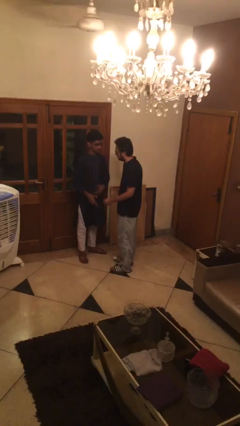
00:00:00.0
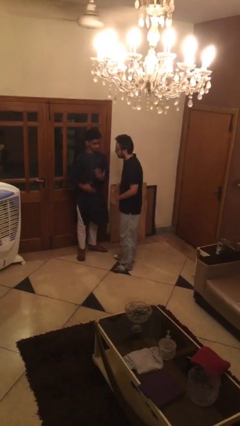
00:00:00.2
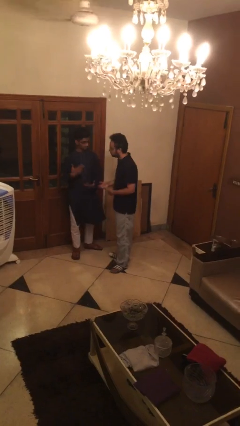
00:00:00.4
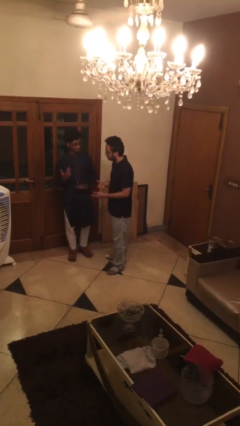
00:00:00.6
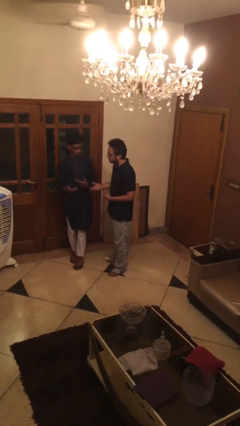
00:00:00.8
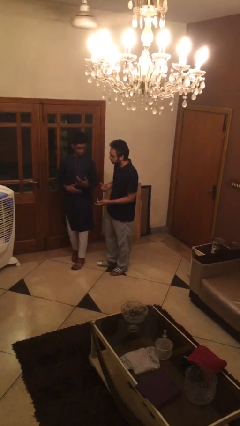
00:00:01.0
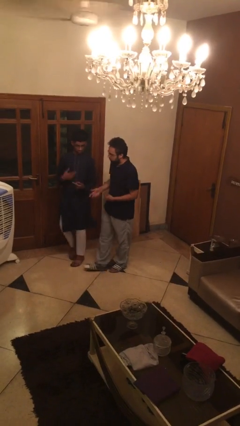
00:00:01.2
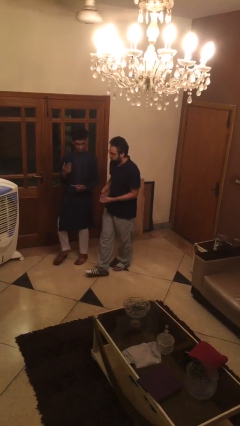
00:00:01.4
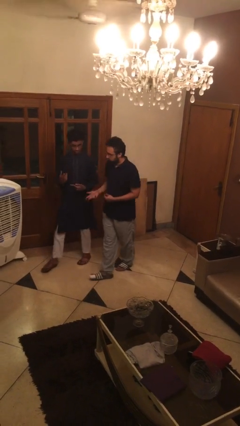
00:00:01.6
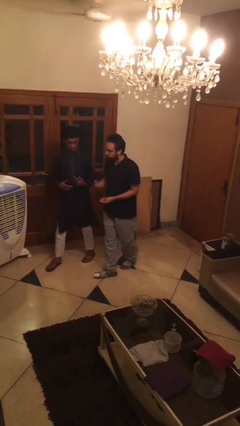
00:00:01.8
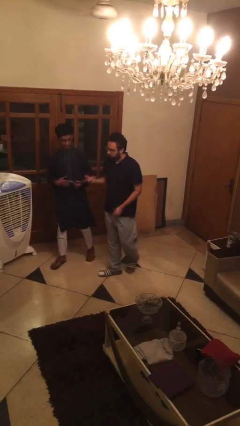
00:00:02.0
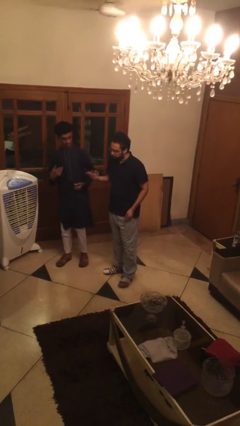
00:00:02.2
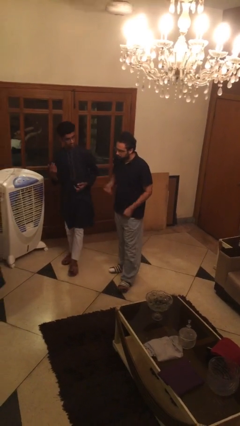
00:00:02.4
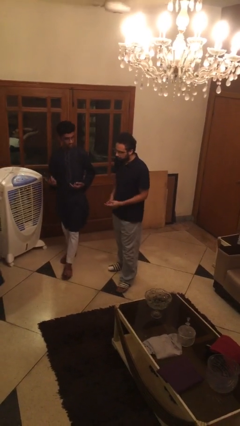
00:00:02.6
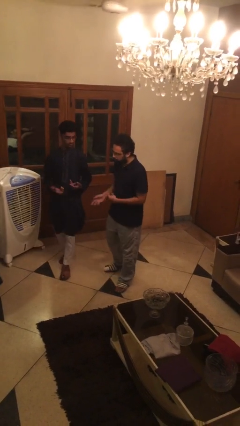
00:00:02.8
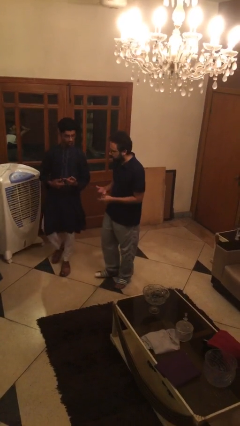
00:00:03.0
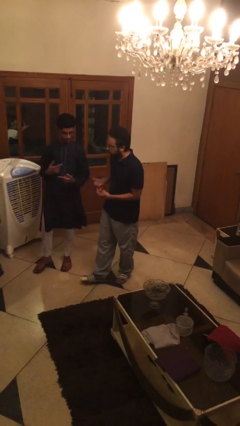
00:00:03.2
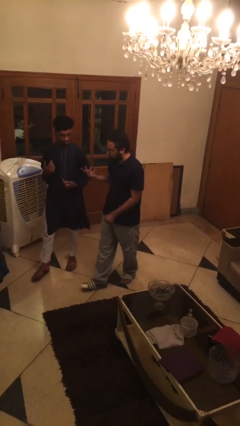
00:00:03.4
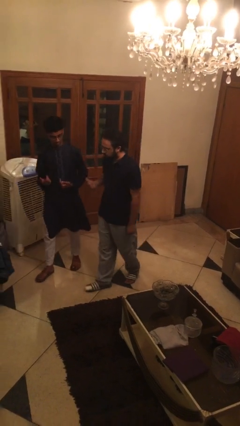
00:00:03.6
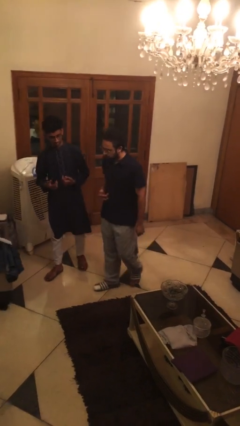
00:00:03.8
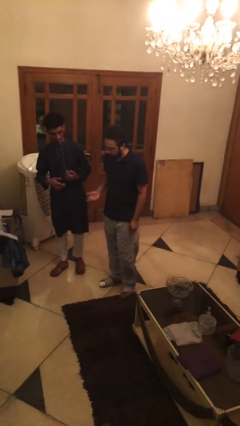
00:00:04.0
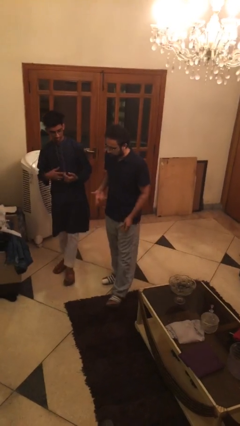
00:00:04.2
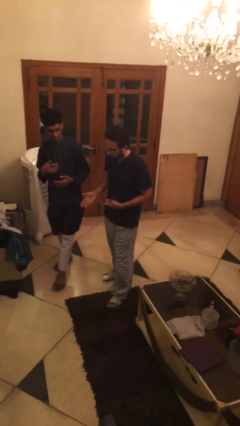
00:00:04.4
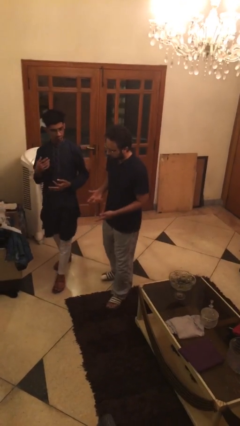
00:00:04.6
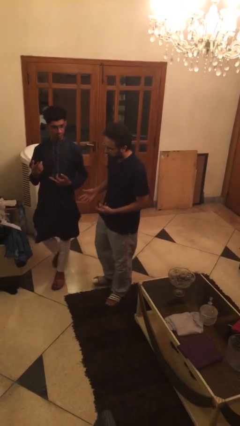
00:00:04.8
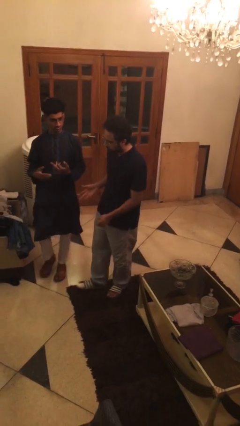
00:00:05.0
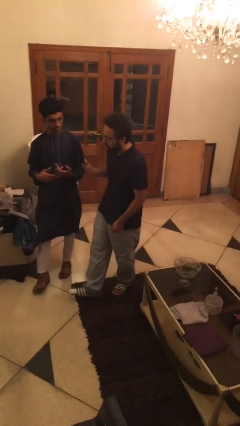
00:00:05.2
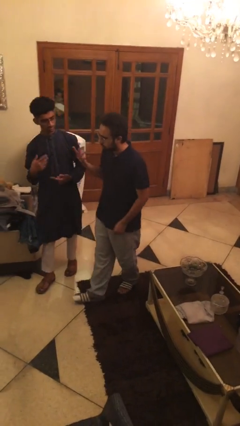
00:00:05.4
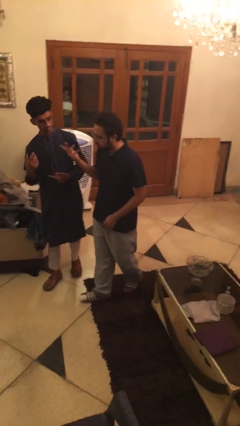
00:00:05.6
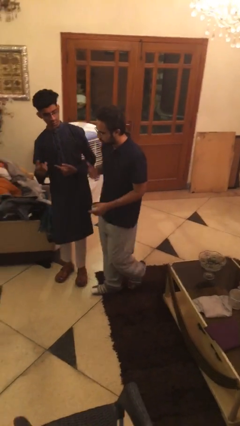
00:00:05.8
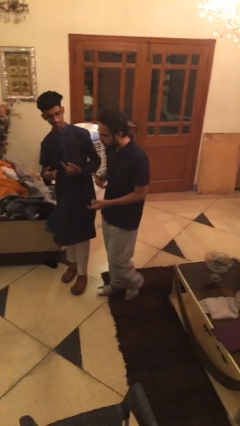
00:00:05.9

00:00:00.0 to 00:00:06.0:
person talks to person

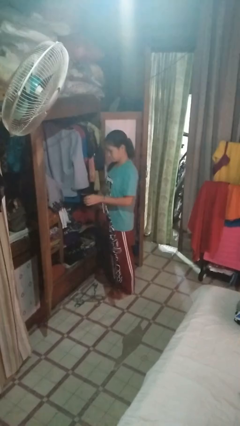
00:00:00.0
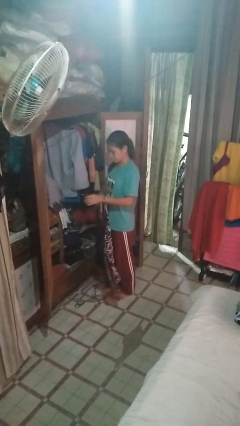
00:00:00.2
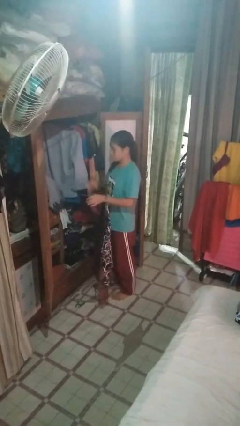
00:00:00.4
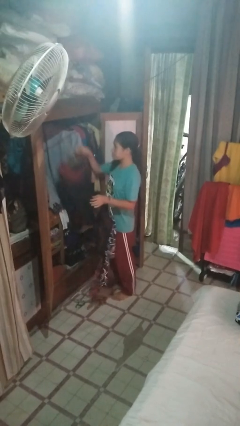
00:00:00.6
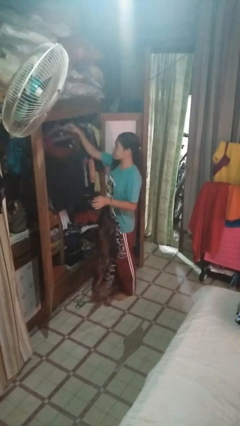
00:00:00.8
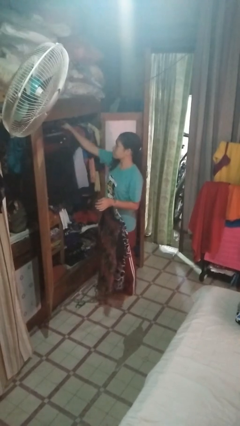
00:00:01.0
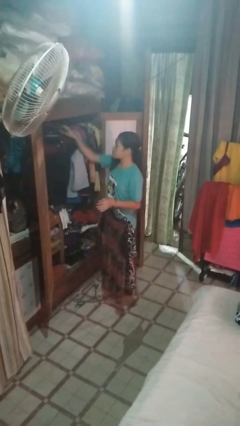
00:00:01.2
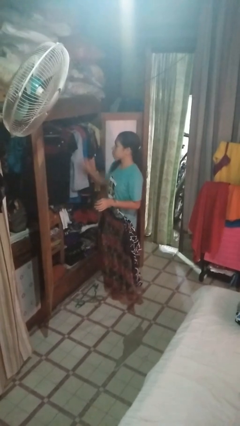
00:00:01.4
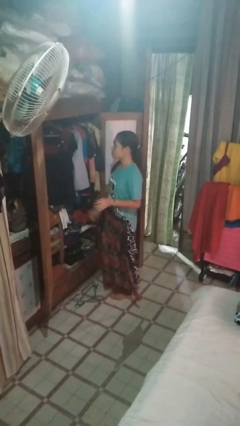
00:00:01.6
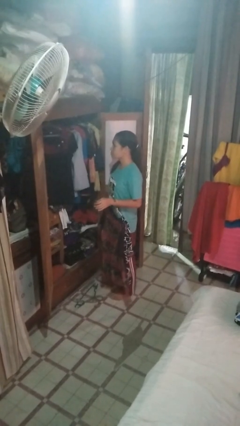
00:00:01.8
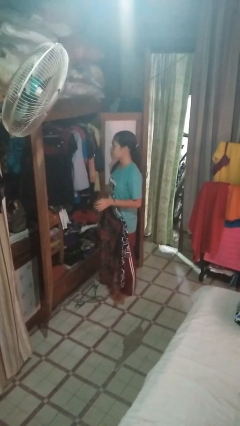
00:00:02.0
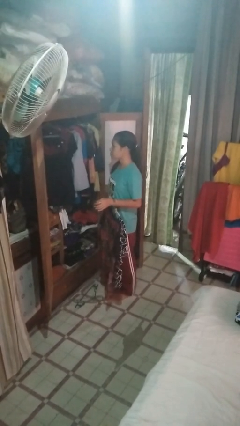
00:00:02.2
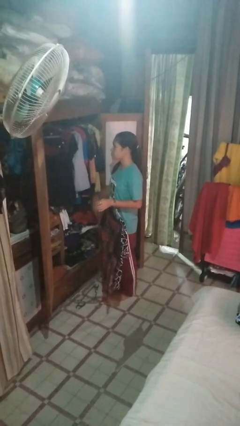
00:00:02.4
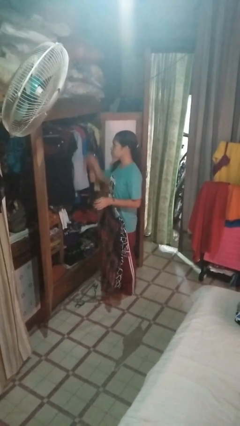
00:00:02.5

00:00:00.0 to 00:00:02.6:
person puts clothes into closet

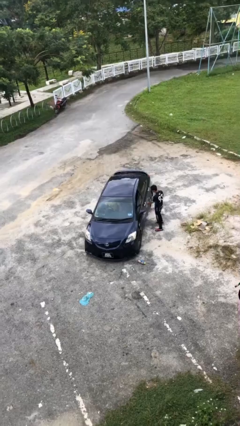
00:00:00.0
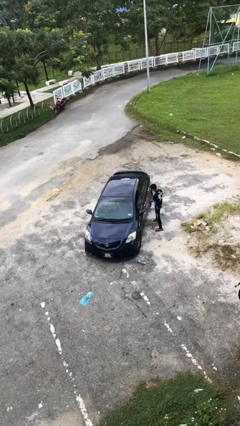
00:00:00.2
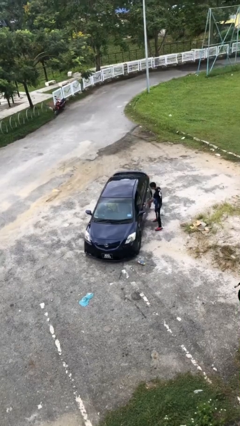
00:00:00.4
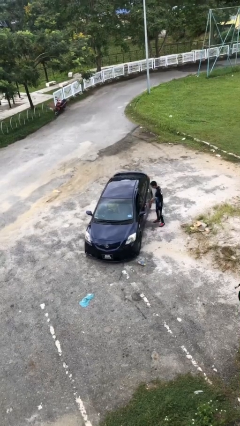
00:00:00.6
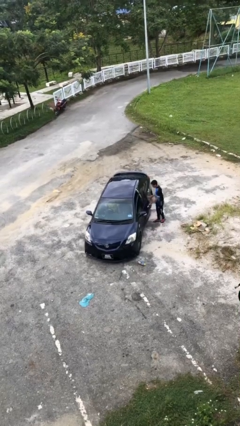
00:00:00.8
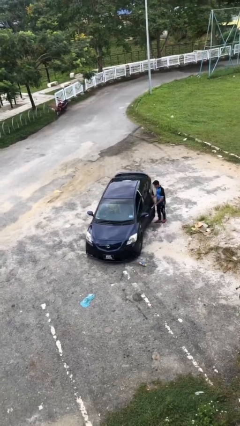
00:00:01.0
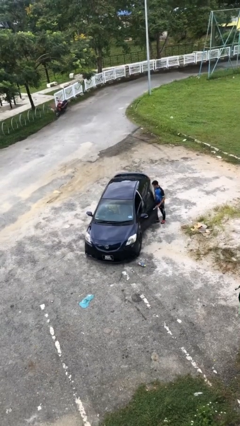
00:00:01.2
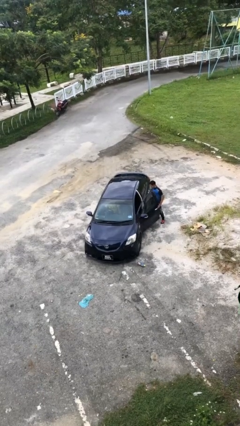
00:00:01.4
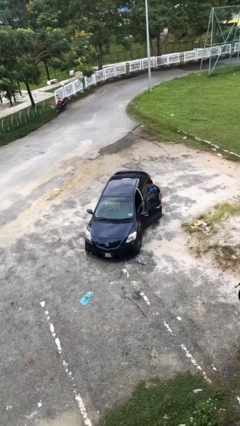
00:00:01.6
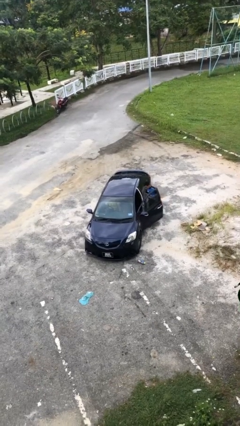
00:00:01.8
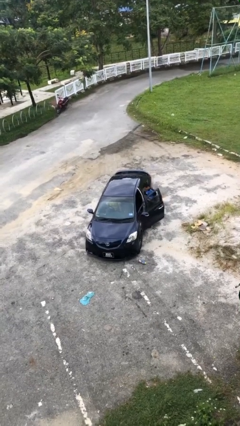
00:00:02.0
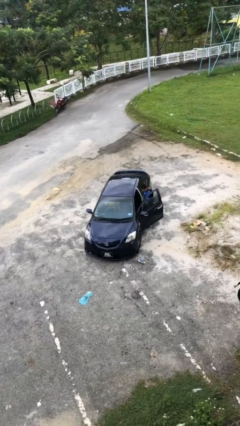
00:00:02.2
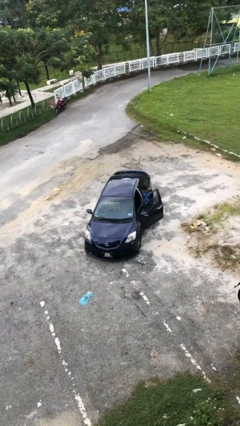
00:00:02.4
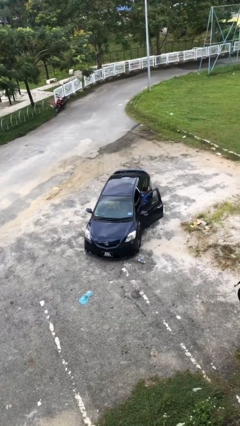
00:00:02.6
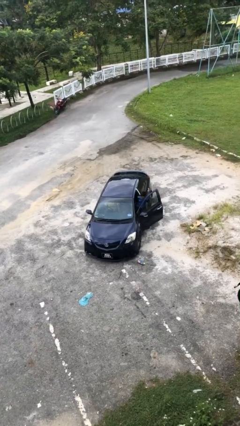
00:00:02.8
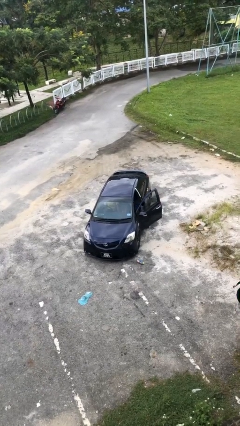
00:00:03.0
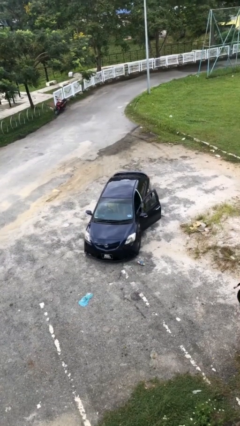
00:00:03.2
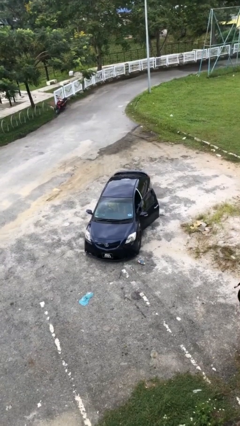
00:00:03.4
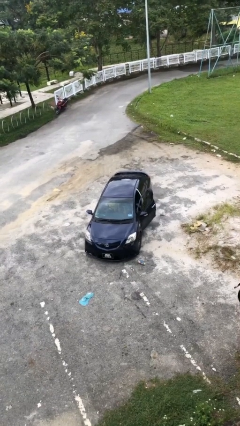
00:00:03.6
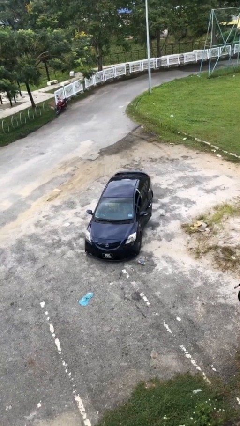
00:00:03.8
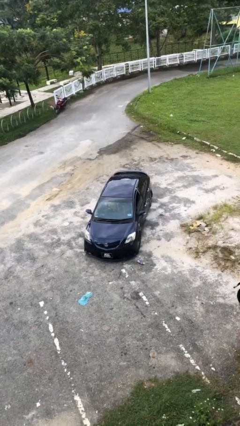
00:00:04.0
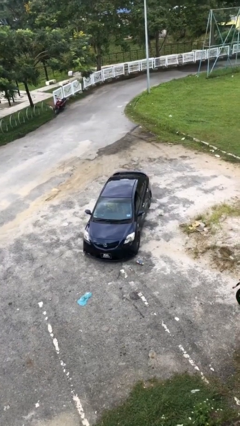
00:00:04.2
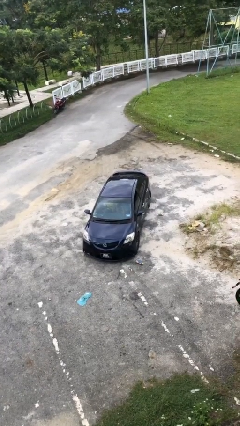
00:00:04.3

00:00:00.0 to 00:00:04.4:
car picks up person

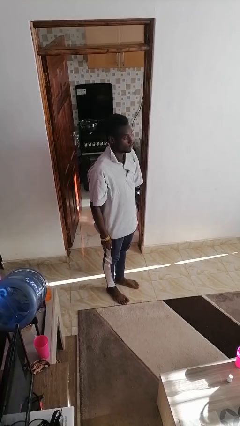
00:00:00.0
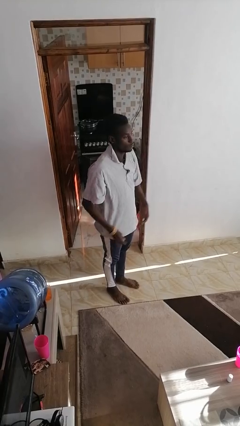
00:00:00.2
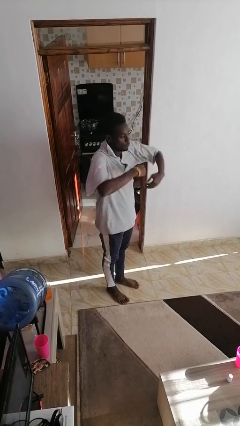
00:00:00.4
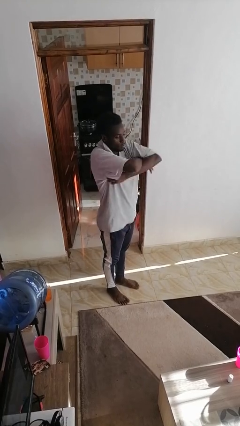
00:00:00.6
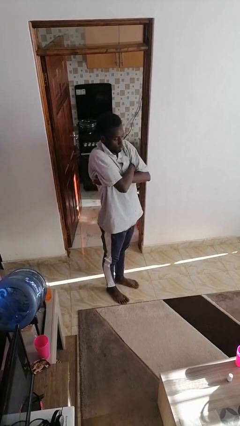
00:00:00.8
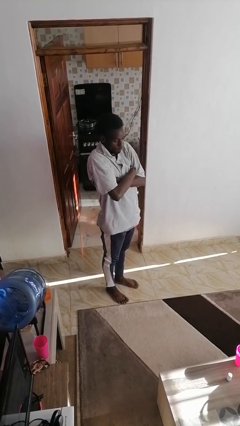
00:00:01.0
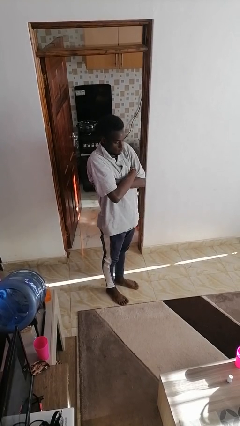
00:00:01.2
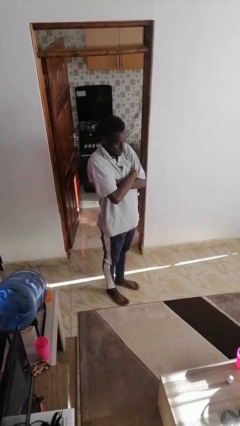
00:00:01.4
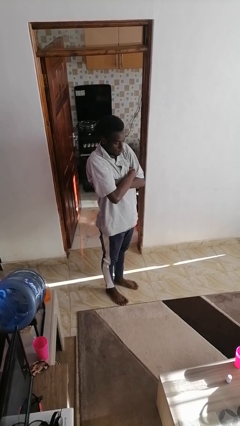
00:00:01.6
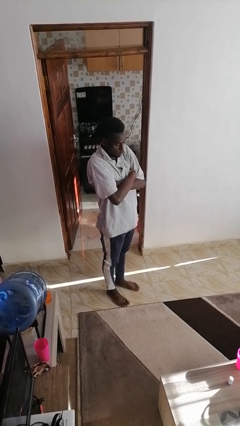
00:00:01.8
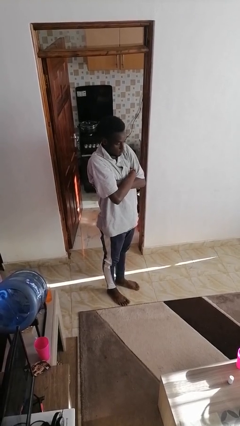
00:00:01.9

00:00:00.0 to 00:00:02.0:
person crosses arms

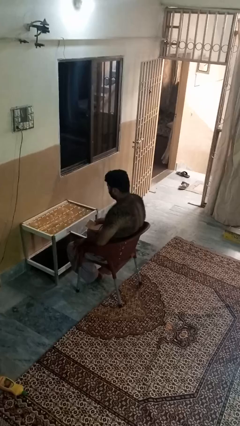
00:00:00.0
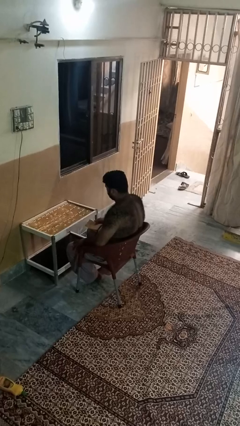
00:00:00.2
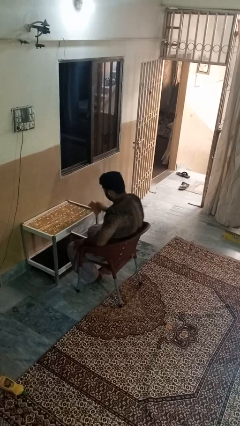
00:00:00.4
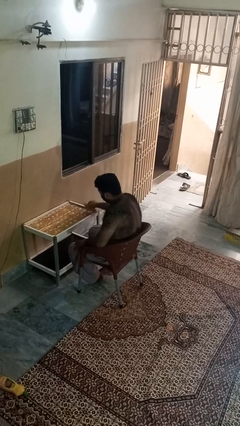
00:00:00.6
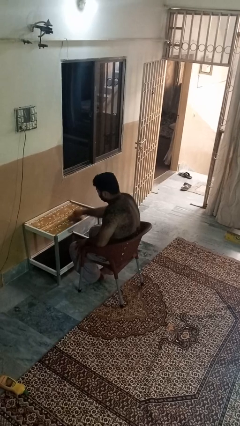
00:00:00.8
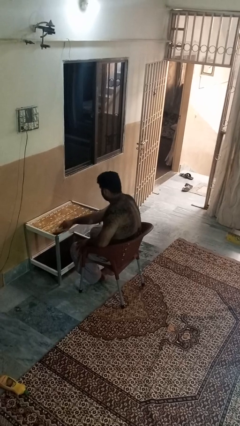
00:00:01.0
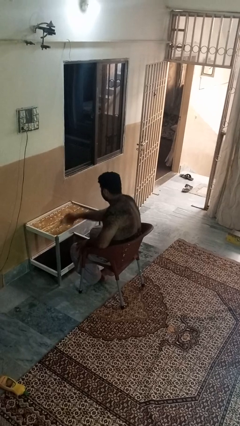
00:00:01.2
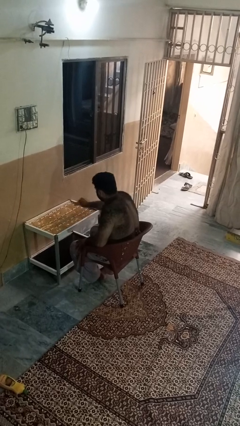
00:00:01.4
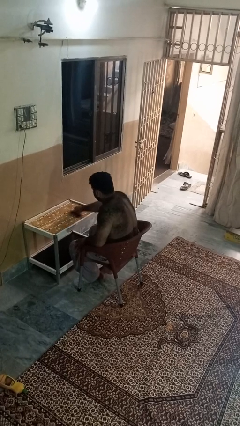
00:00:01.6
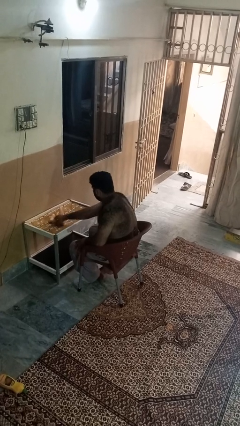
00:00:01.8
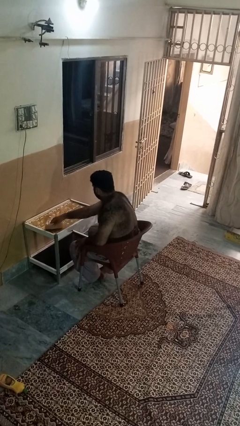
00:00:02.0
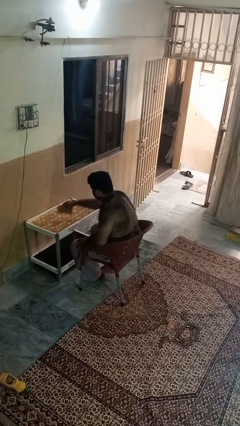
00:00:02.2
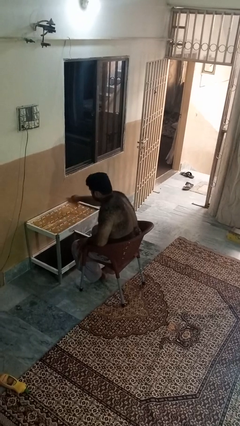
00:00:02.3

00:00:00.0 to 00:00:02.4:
person cleans table with rag

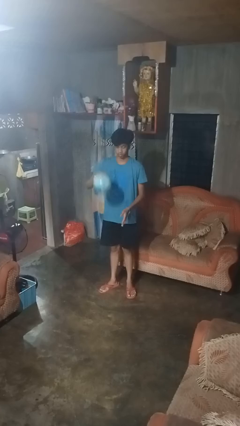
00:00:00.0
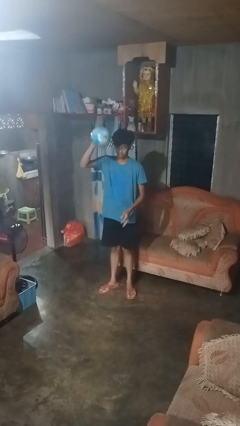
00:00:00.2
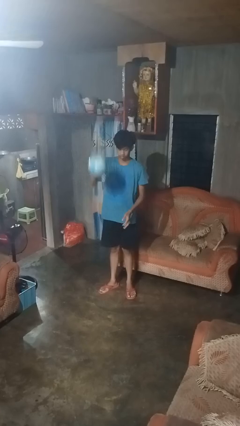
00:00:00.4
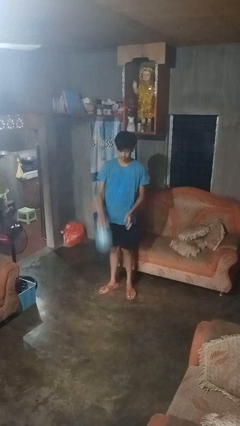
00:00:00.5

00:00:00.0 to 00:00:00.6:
person bounces ball on floor
